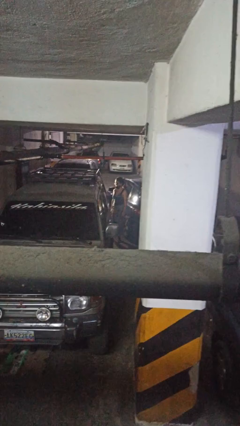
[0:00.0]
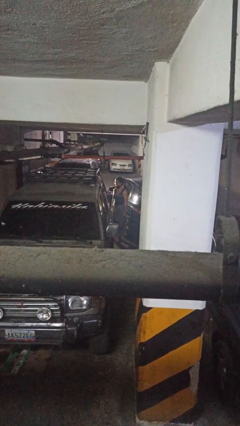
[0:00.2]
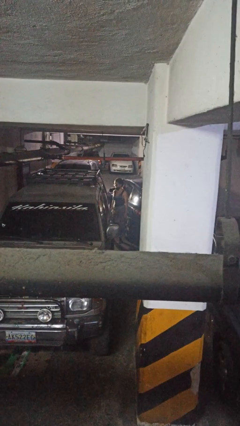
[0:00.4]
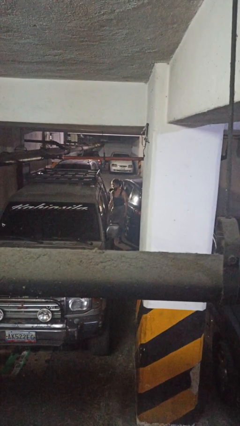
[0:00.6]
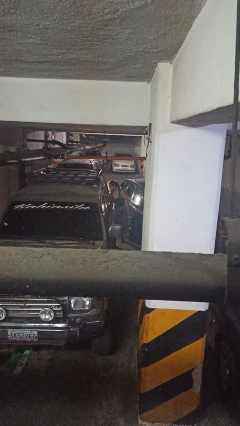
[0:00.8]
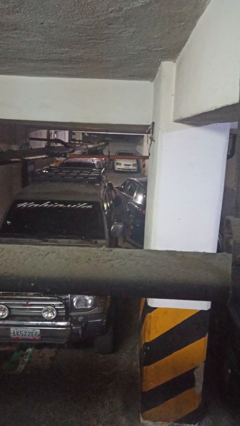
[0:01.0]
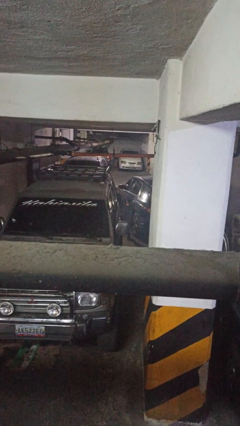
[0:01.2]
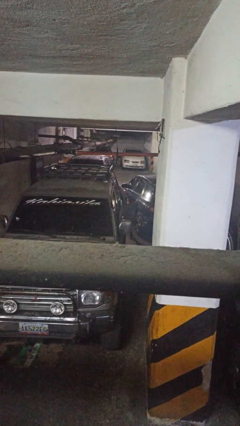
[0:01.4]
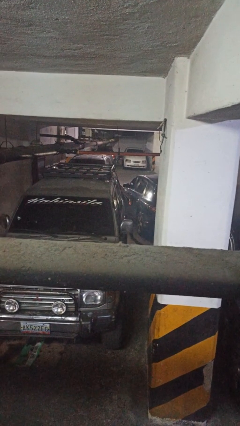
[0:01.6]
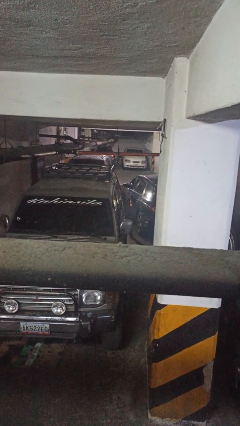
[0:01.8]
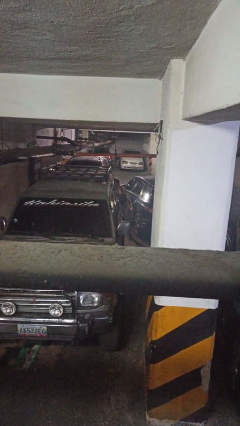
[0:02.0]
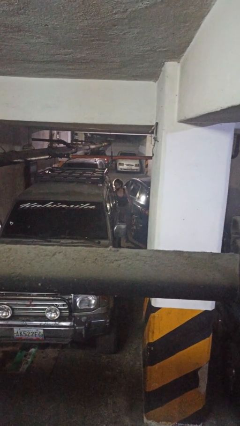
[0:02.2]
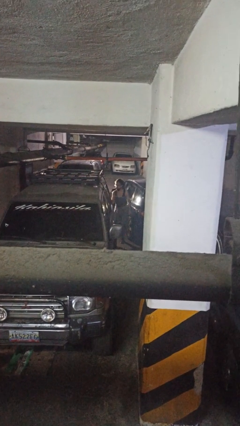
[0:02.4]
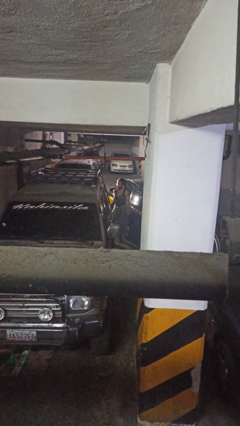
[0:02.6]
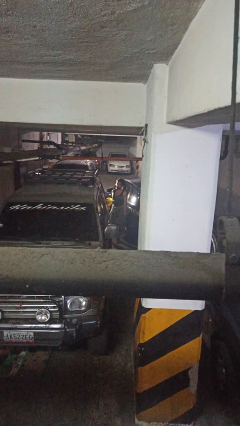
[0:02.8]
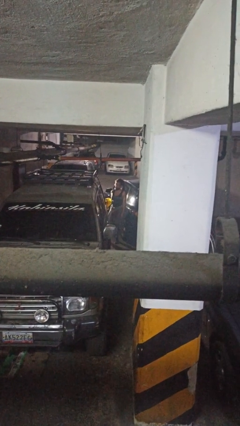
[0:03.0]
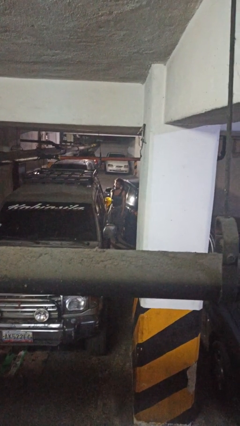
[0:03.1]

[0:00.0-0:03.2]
person unloads car

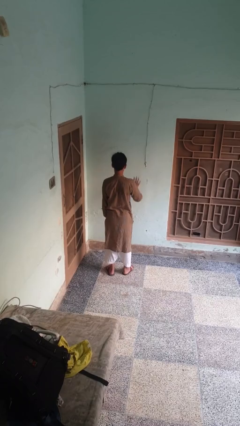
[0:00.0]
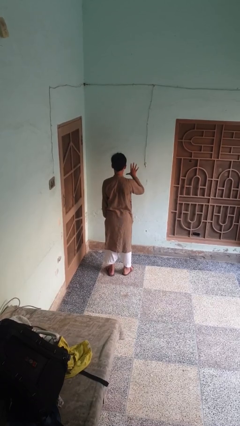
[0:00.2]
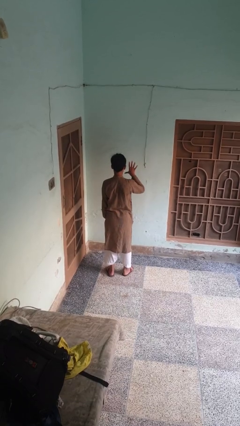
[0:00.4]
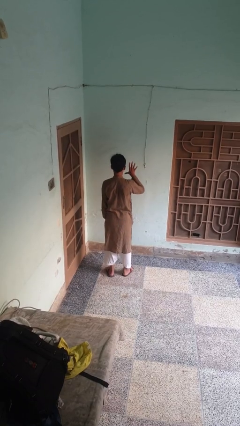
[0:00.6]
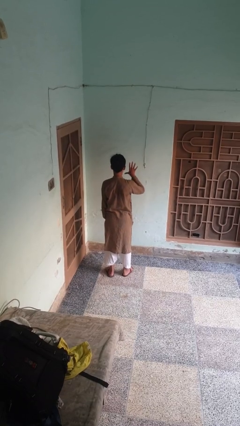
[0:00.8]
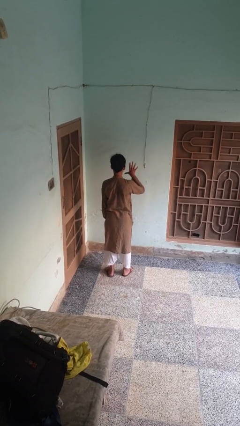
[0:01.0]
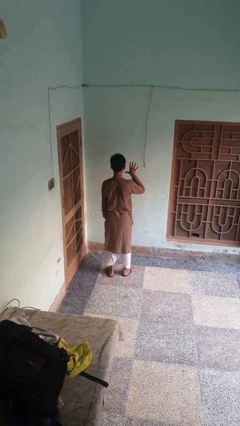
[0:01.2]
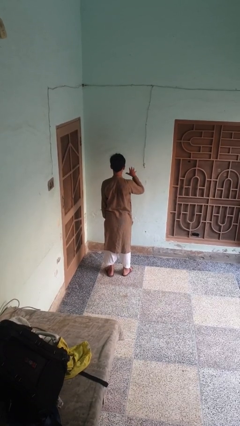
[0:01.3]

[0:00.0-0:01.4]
person gestures number five

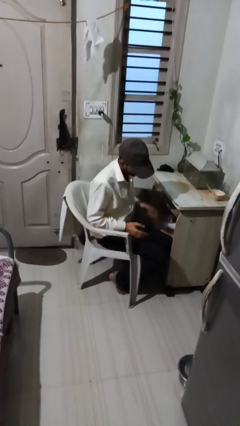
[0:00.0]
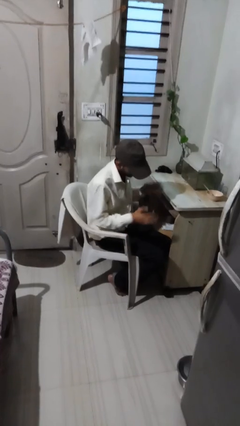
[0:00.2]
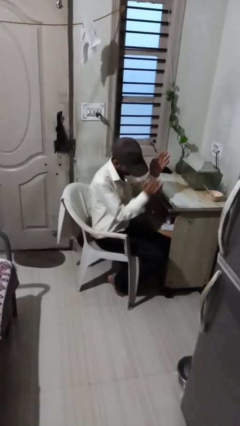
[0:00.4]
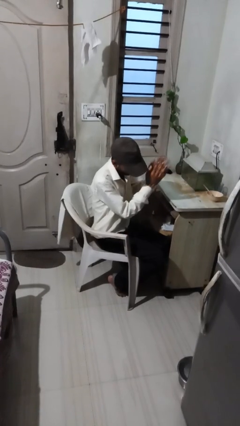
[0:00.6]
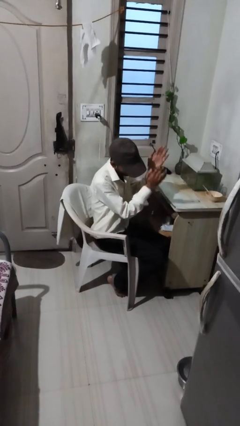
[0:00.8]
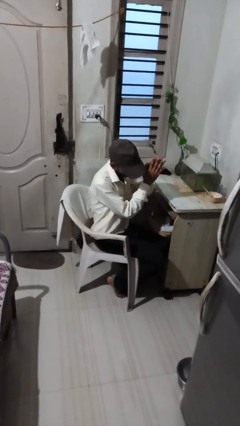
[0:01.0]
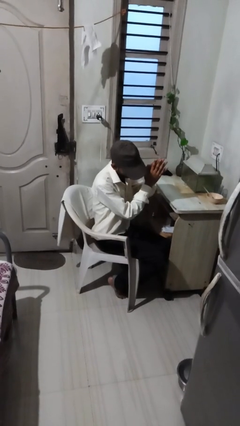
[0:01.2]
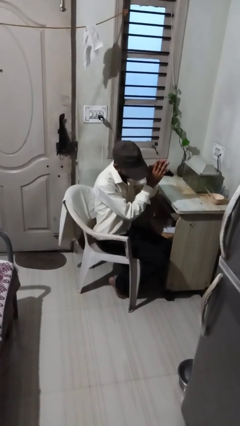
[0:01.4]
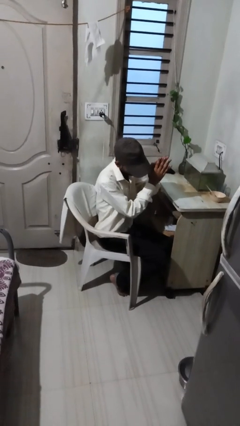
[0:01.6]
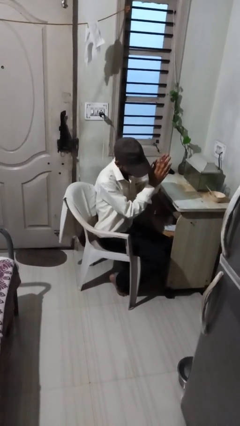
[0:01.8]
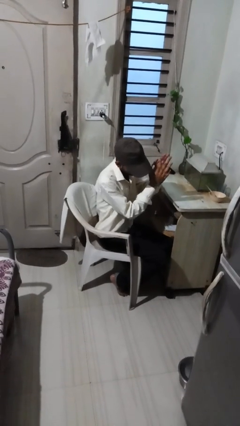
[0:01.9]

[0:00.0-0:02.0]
person claps hands

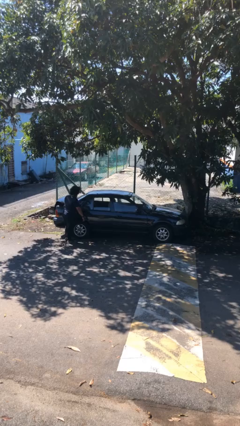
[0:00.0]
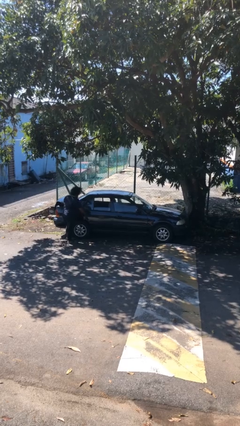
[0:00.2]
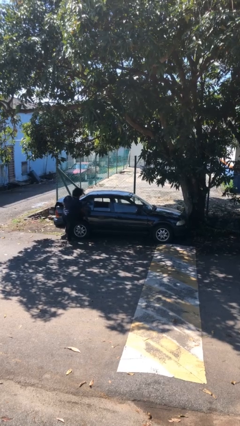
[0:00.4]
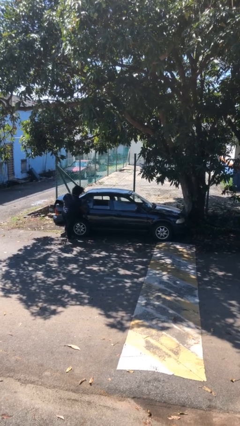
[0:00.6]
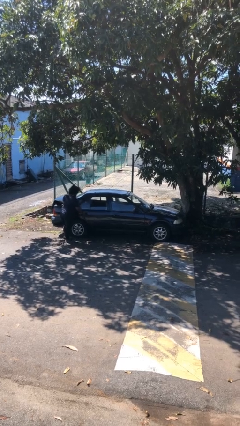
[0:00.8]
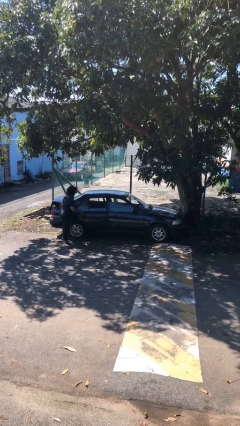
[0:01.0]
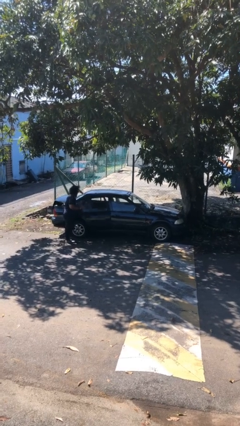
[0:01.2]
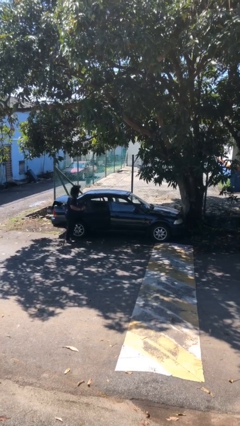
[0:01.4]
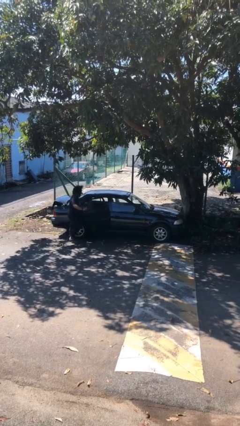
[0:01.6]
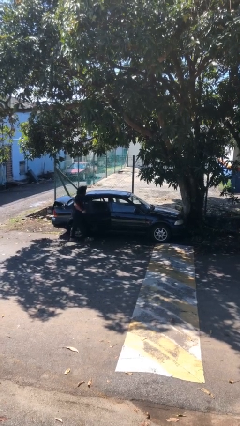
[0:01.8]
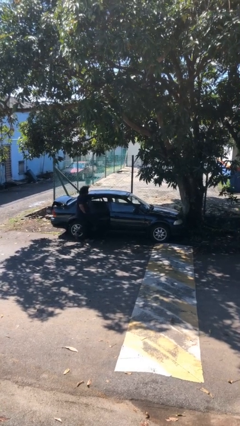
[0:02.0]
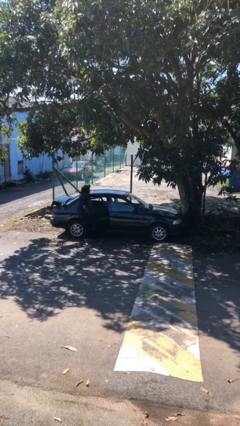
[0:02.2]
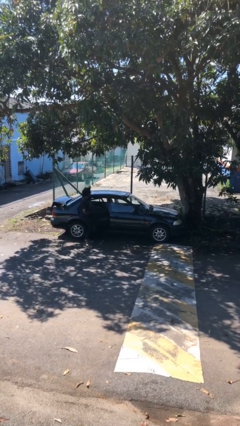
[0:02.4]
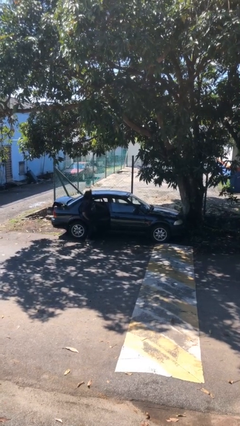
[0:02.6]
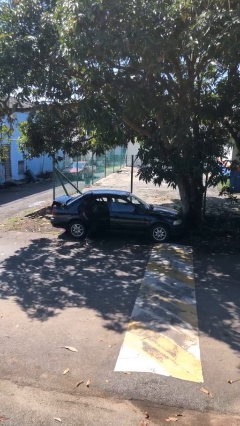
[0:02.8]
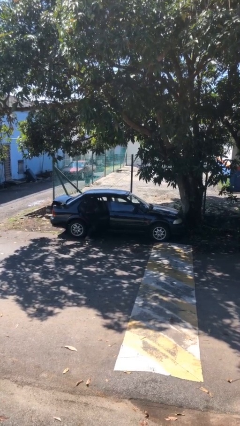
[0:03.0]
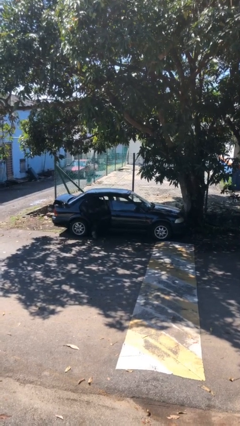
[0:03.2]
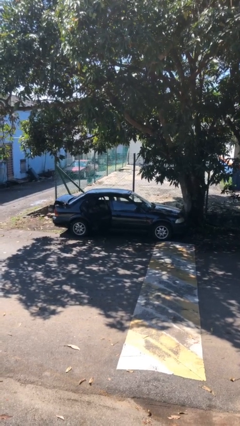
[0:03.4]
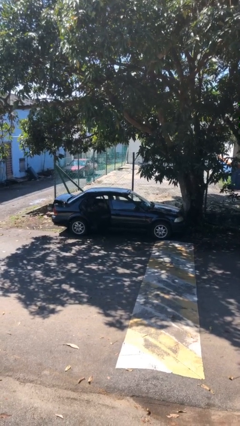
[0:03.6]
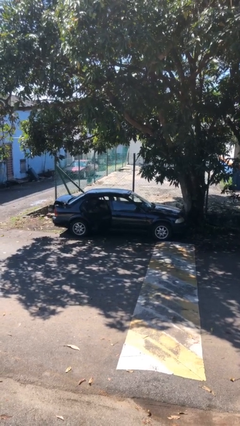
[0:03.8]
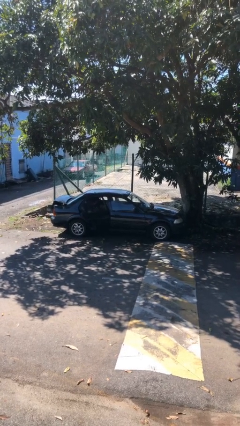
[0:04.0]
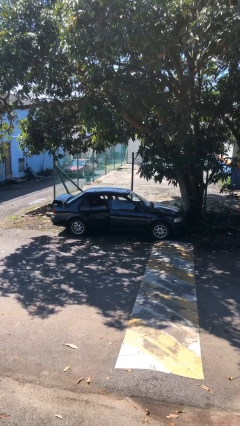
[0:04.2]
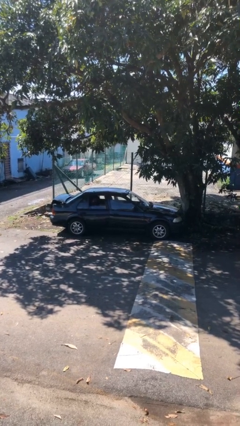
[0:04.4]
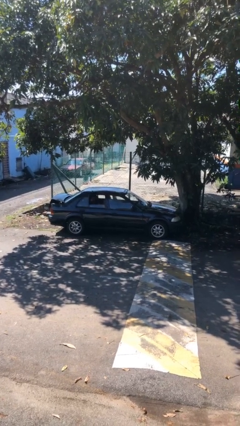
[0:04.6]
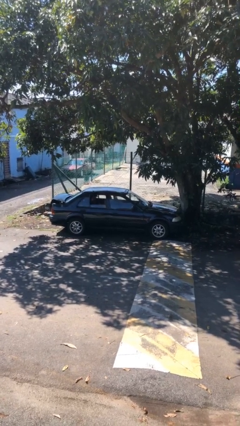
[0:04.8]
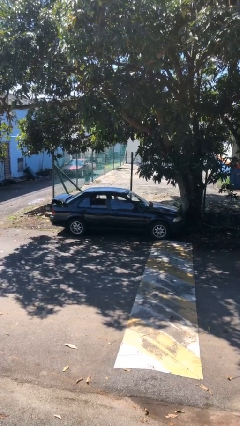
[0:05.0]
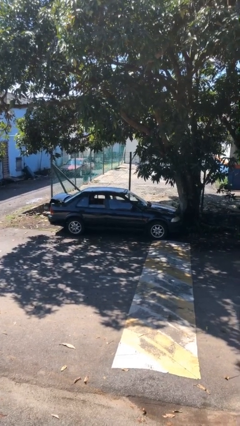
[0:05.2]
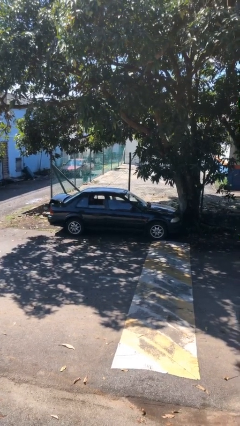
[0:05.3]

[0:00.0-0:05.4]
car picks up person

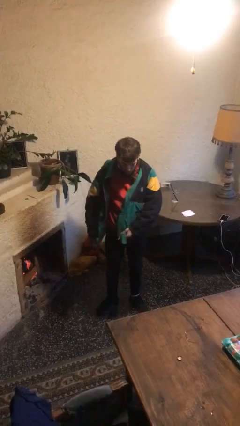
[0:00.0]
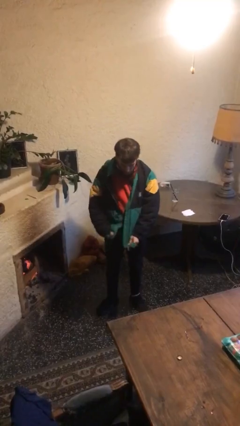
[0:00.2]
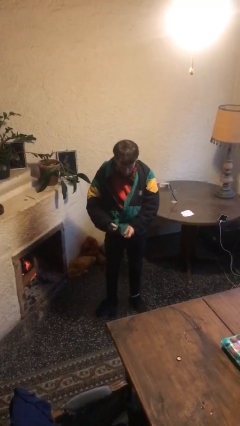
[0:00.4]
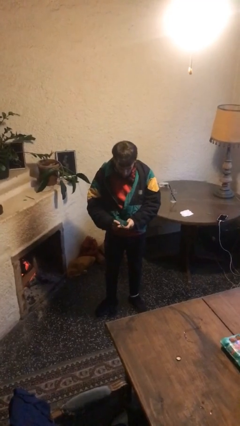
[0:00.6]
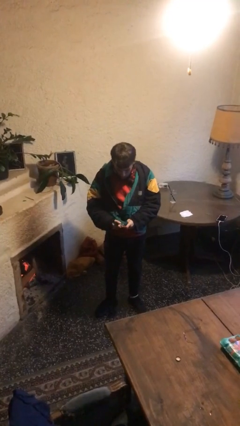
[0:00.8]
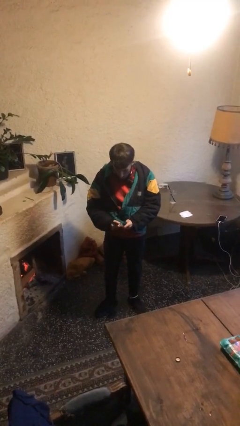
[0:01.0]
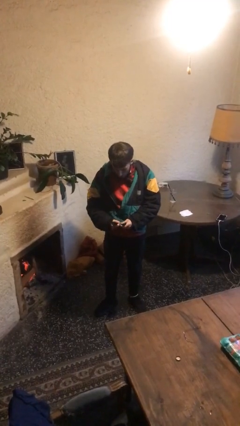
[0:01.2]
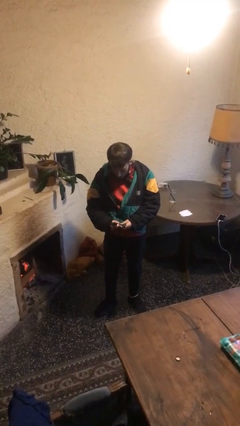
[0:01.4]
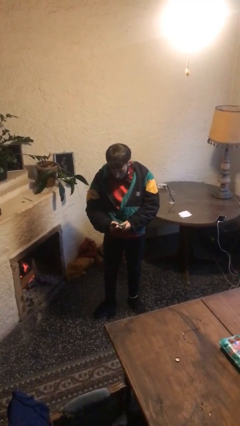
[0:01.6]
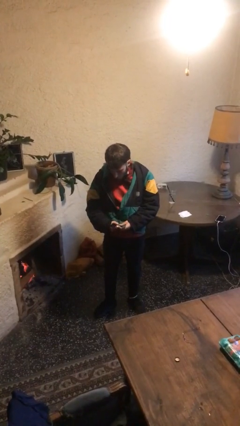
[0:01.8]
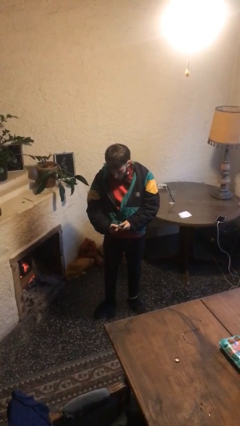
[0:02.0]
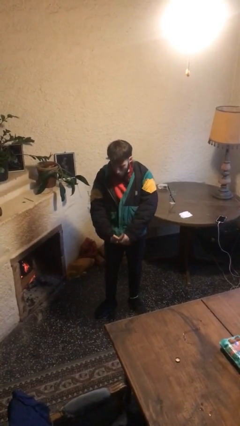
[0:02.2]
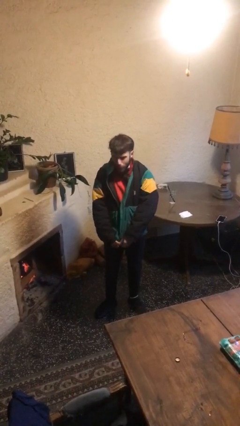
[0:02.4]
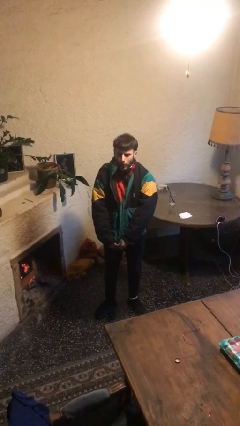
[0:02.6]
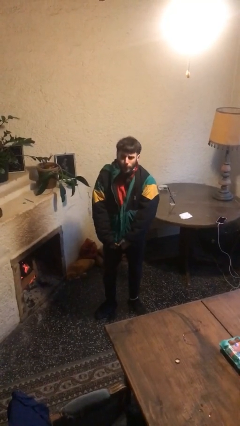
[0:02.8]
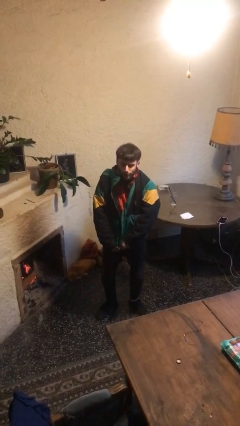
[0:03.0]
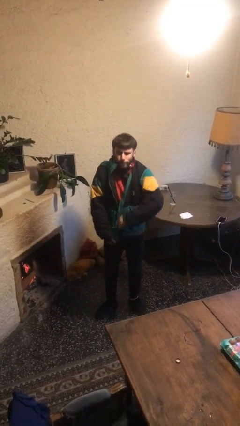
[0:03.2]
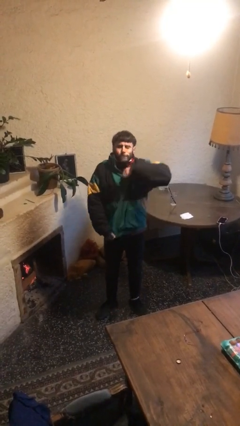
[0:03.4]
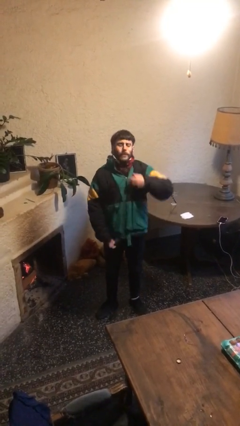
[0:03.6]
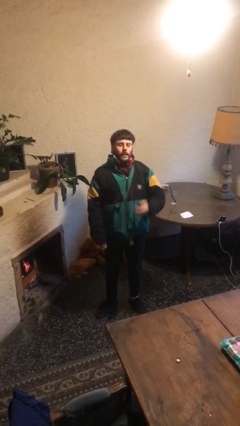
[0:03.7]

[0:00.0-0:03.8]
person zips up jacket

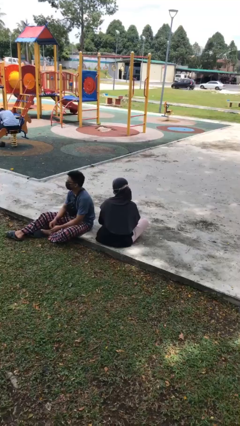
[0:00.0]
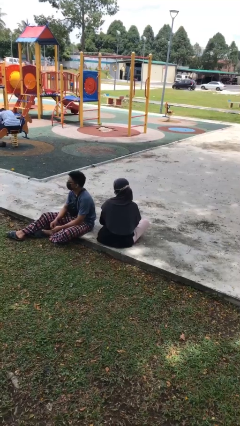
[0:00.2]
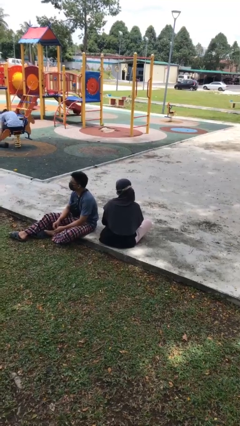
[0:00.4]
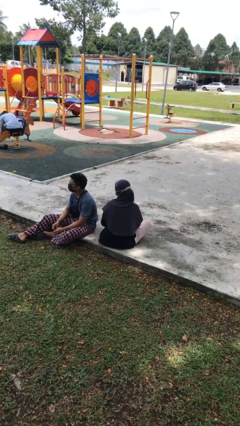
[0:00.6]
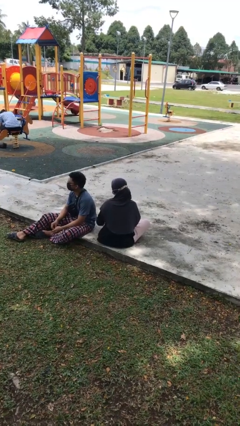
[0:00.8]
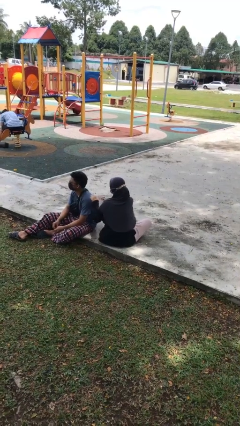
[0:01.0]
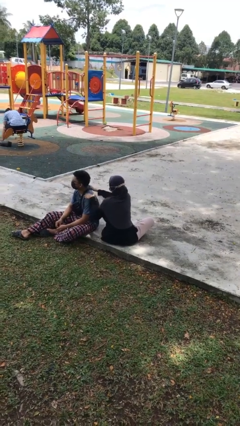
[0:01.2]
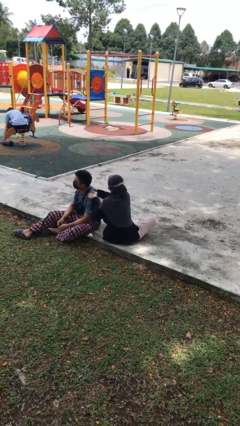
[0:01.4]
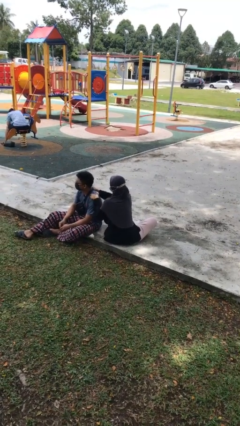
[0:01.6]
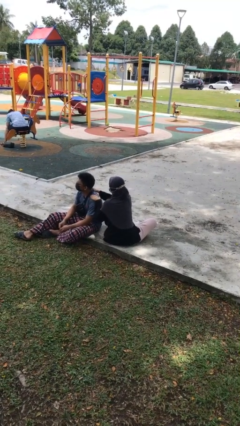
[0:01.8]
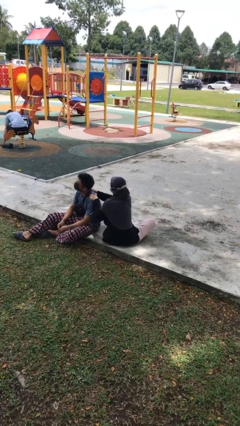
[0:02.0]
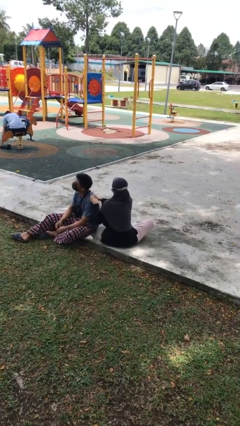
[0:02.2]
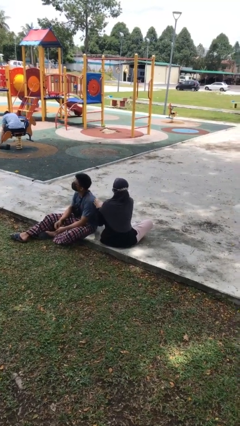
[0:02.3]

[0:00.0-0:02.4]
person pounds shoulders of person
